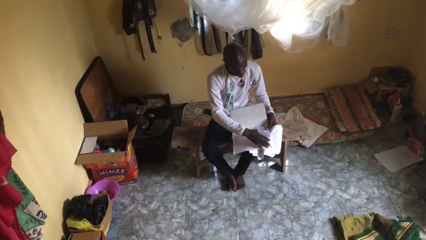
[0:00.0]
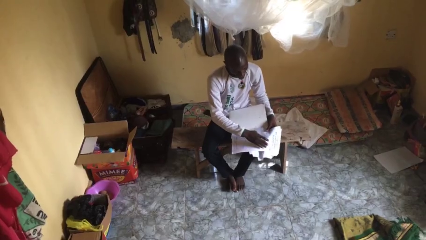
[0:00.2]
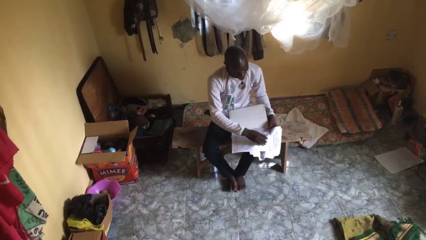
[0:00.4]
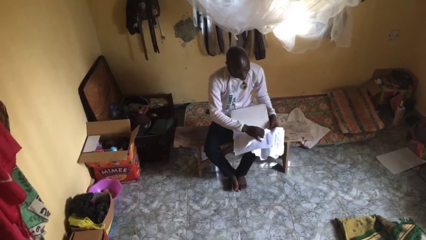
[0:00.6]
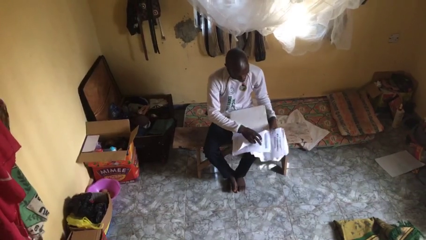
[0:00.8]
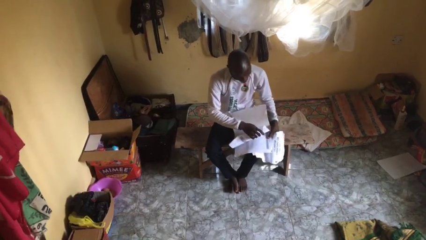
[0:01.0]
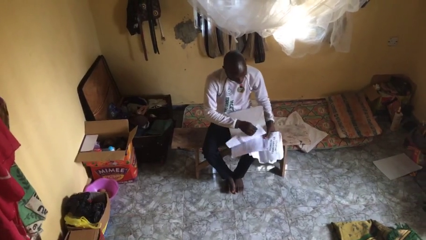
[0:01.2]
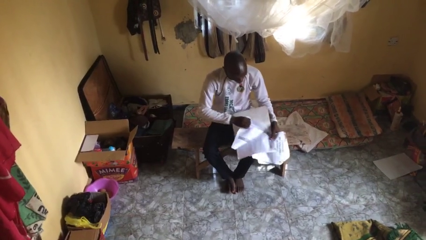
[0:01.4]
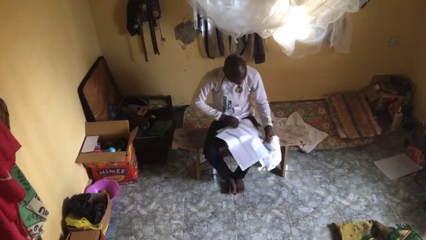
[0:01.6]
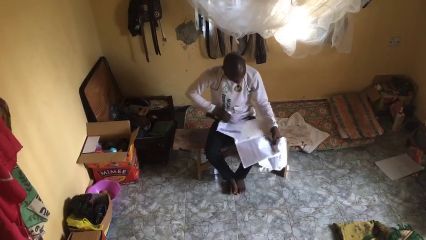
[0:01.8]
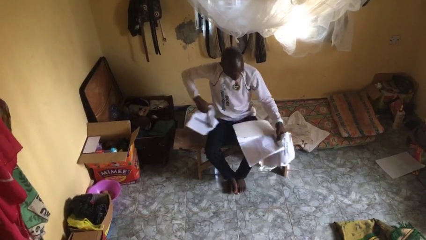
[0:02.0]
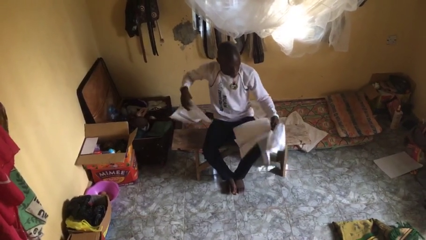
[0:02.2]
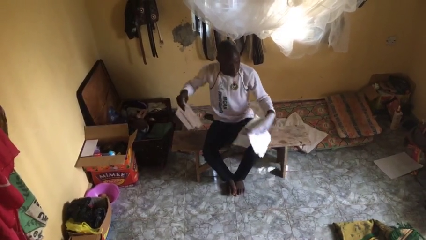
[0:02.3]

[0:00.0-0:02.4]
person tears paper

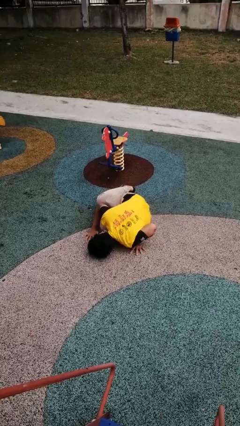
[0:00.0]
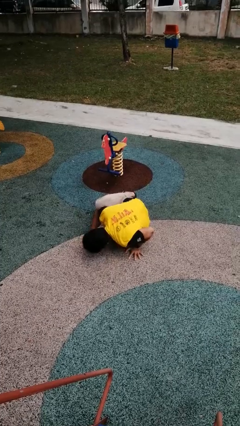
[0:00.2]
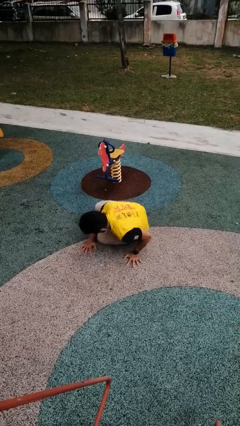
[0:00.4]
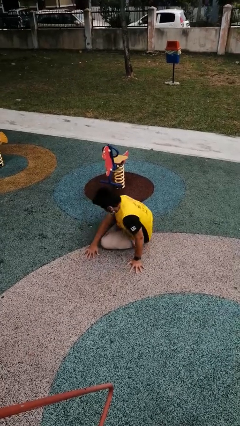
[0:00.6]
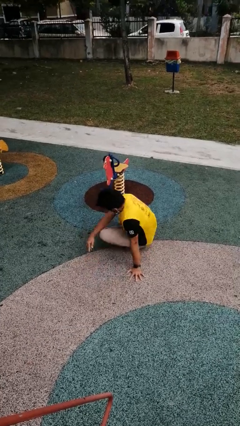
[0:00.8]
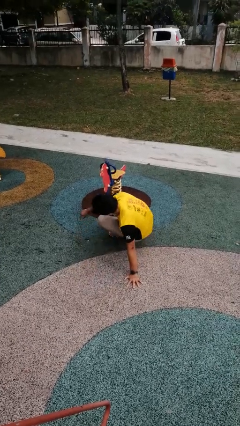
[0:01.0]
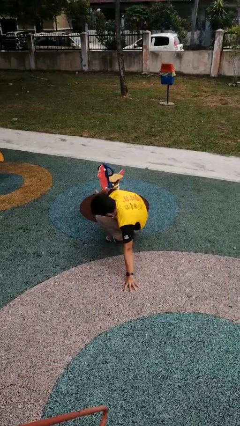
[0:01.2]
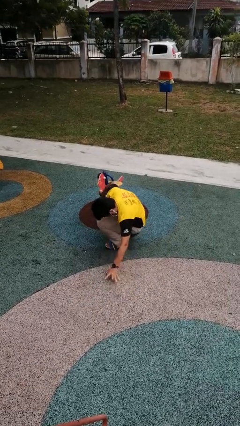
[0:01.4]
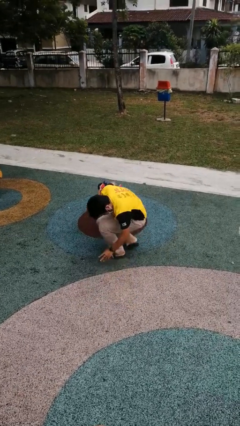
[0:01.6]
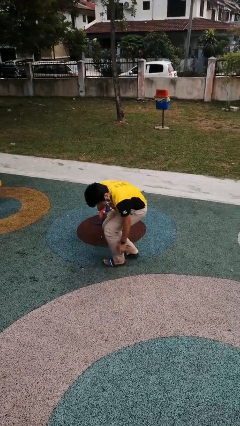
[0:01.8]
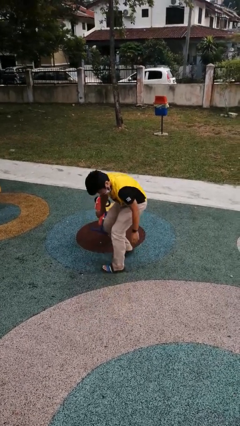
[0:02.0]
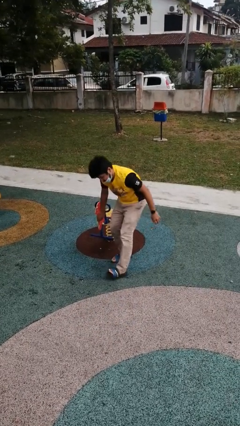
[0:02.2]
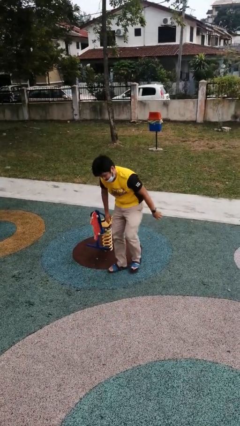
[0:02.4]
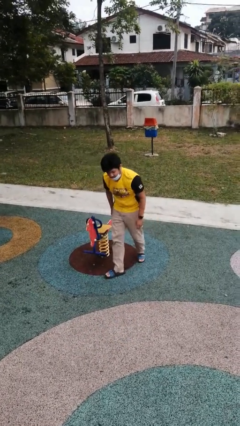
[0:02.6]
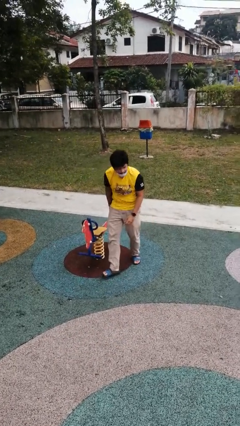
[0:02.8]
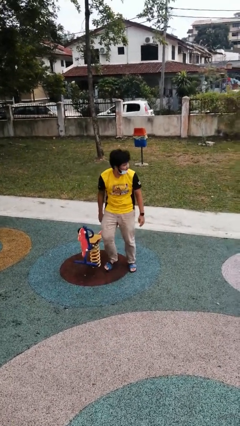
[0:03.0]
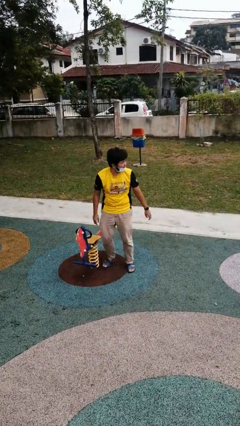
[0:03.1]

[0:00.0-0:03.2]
person stands up from floor

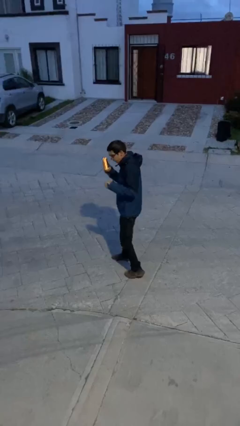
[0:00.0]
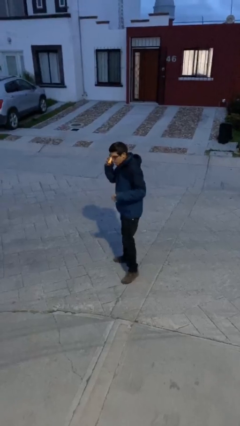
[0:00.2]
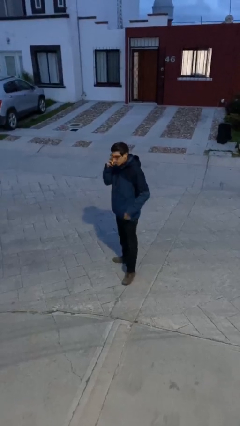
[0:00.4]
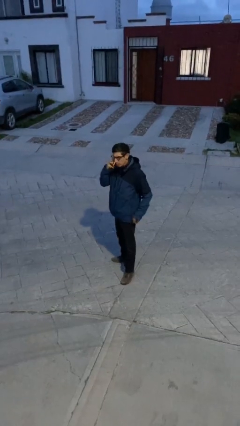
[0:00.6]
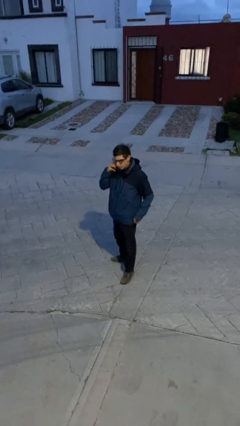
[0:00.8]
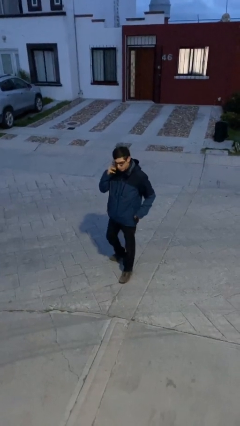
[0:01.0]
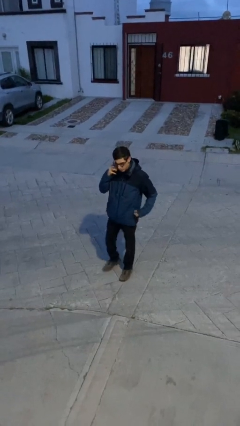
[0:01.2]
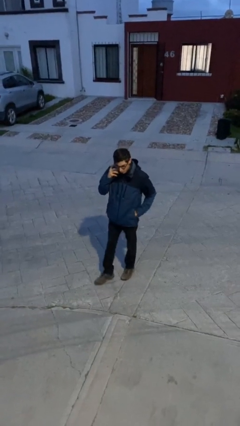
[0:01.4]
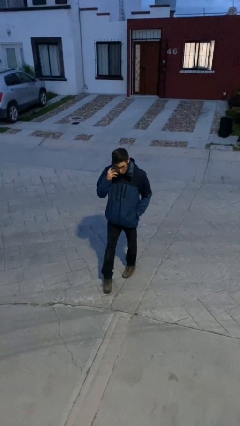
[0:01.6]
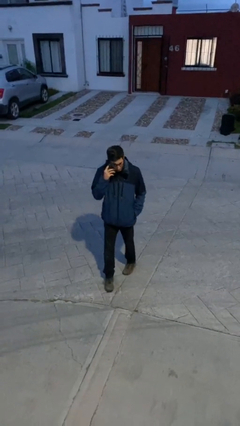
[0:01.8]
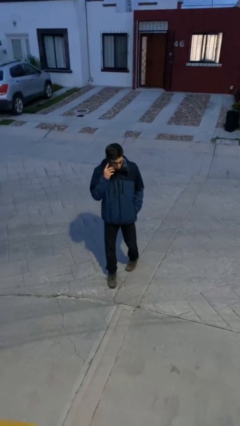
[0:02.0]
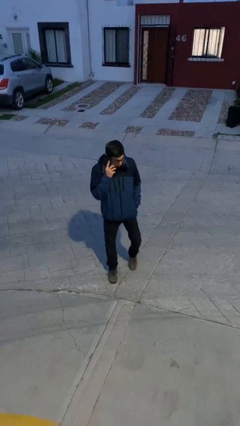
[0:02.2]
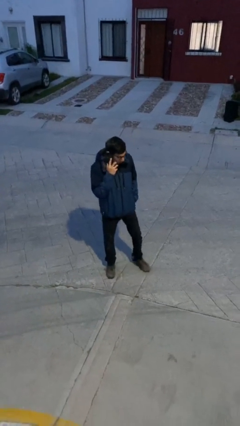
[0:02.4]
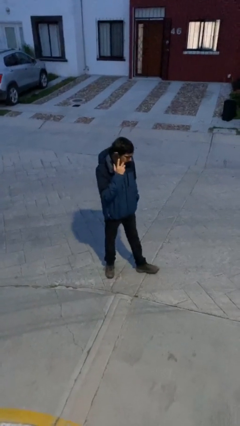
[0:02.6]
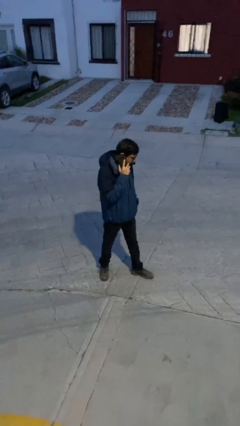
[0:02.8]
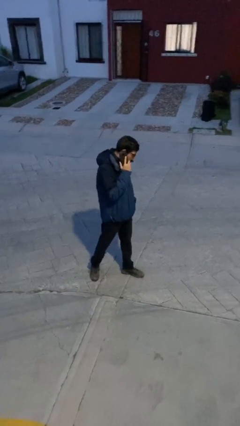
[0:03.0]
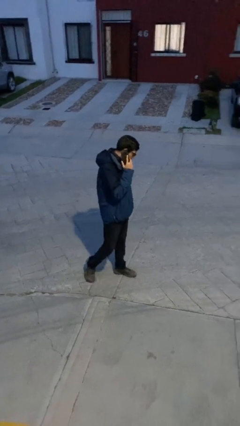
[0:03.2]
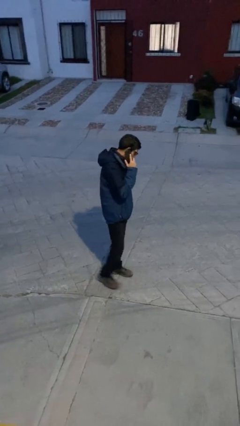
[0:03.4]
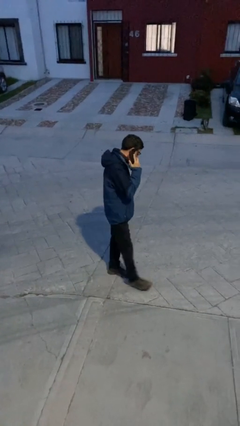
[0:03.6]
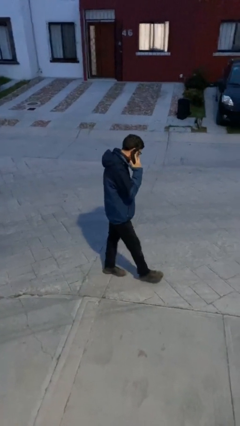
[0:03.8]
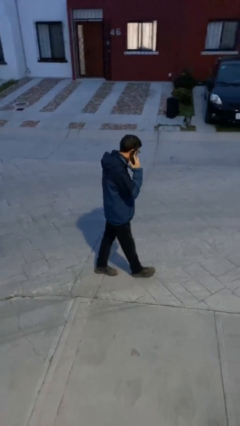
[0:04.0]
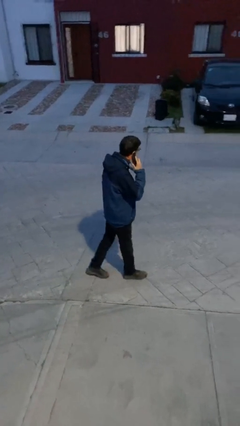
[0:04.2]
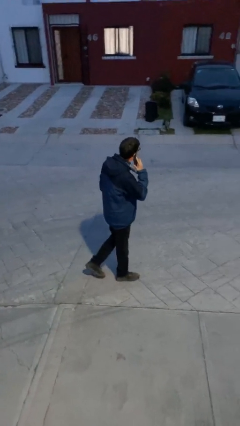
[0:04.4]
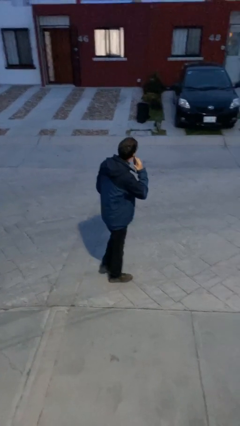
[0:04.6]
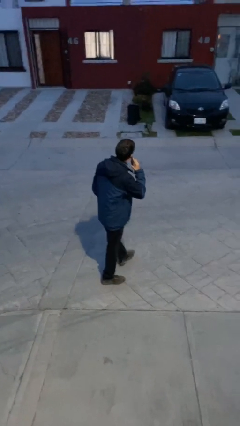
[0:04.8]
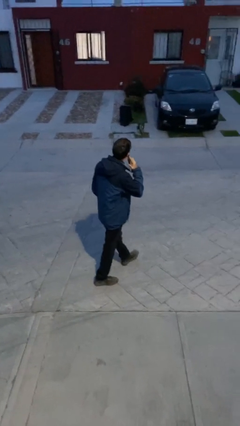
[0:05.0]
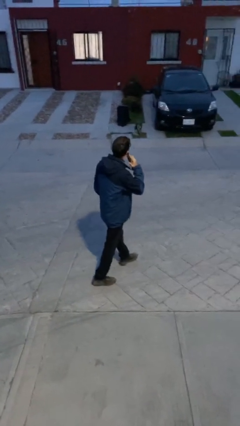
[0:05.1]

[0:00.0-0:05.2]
person talks on phone

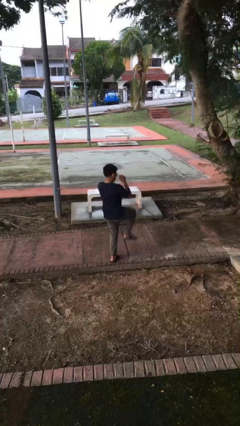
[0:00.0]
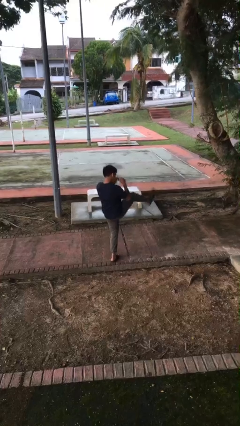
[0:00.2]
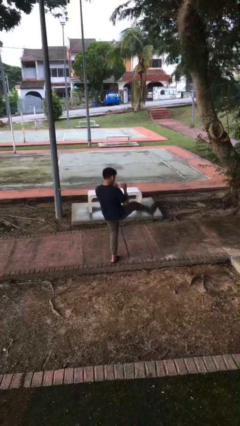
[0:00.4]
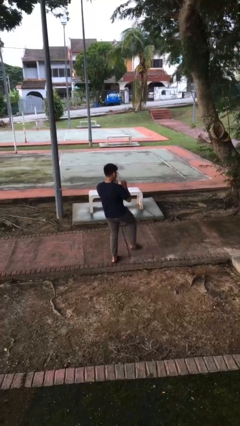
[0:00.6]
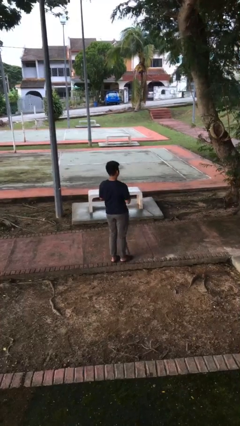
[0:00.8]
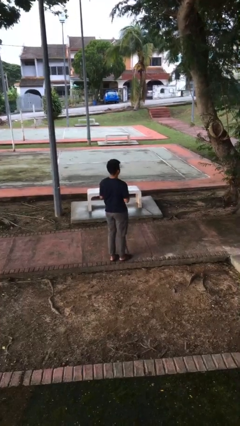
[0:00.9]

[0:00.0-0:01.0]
person karate kicks

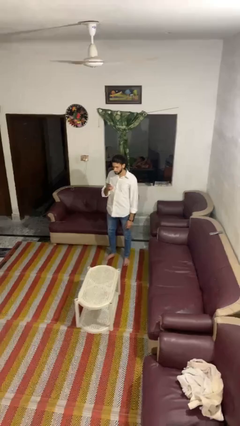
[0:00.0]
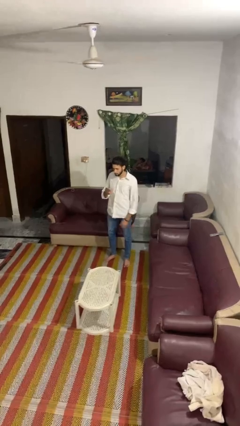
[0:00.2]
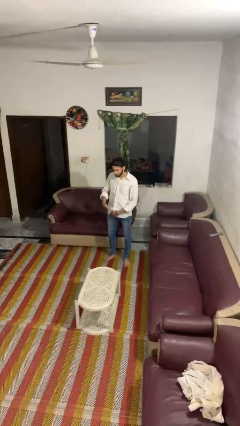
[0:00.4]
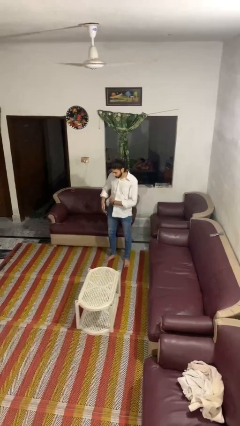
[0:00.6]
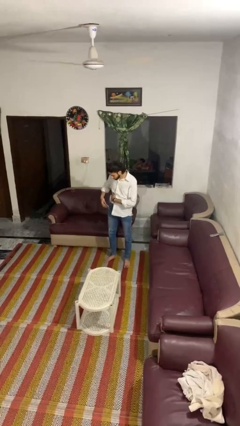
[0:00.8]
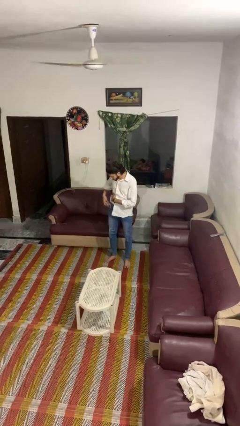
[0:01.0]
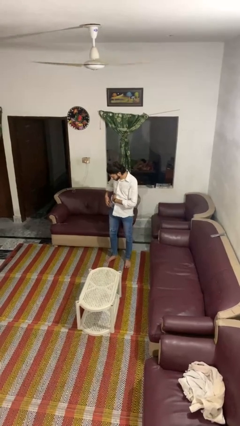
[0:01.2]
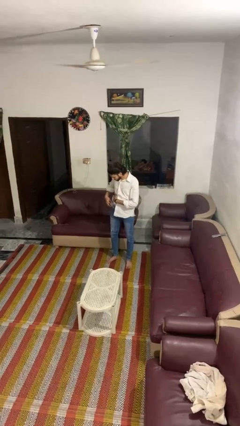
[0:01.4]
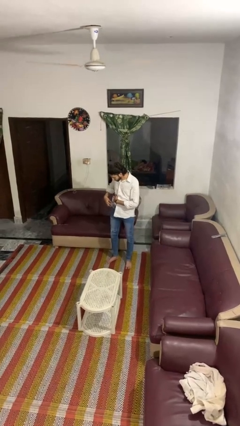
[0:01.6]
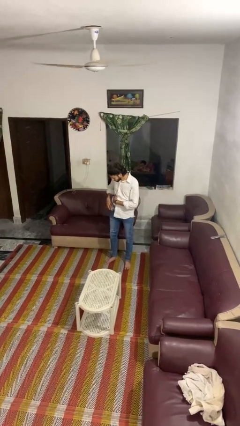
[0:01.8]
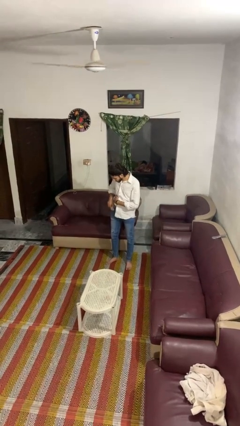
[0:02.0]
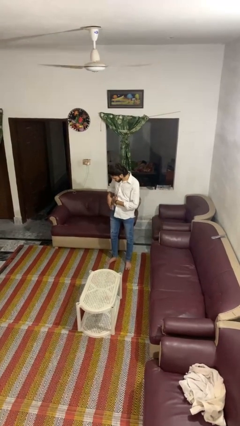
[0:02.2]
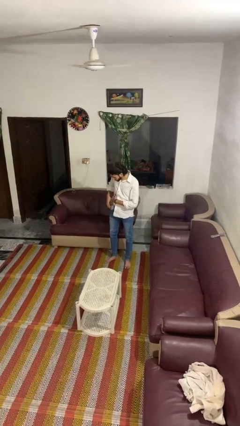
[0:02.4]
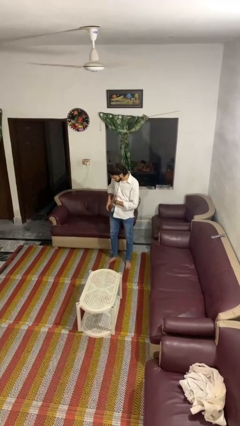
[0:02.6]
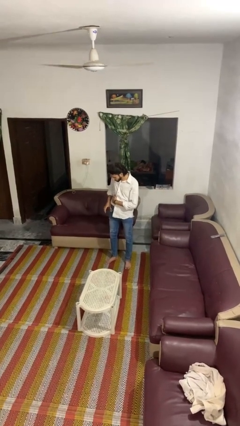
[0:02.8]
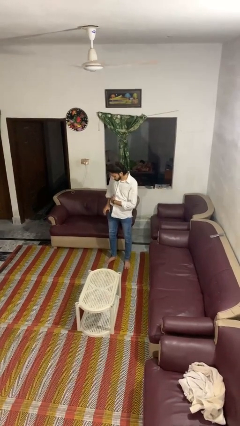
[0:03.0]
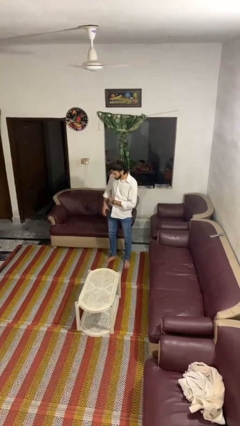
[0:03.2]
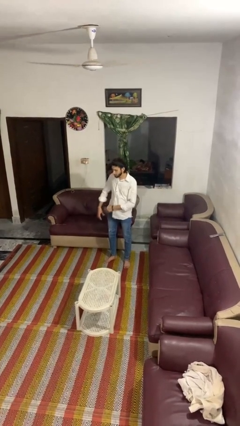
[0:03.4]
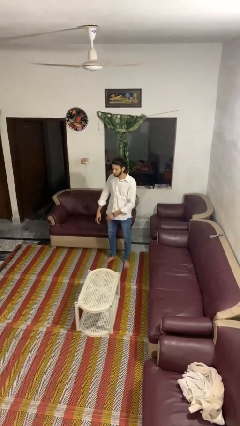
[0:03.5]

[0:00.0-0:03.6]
person puts phone into pocket

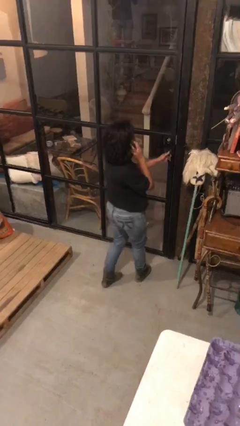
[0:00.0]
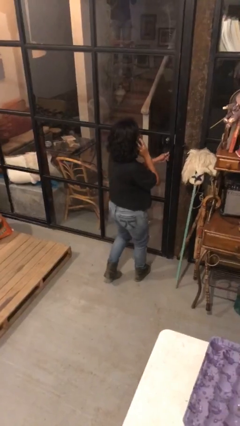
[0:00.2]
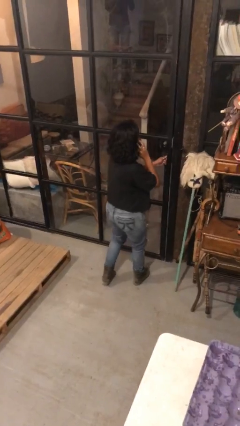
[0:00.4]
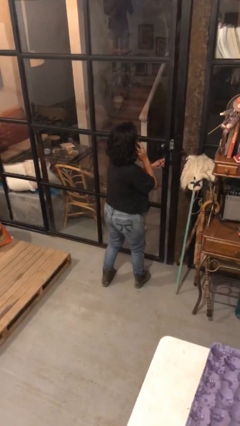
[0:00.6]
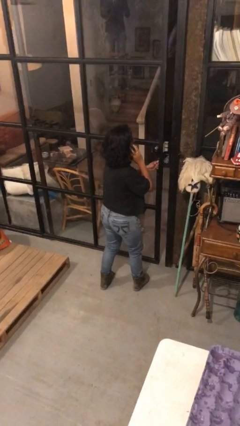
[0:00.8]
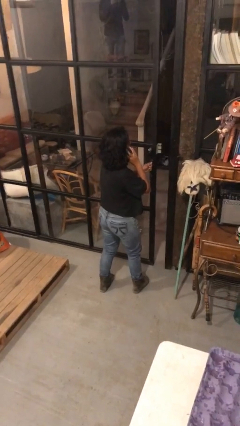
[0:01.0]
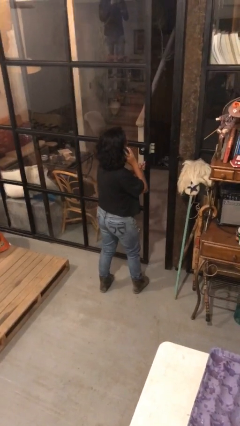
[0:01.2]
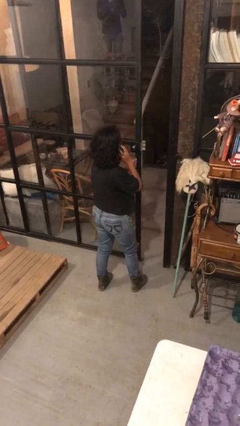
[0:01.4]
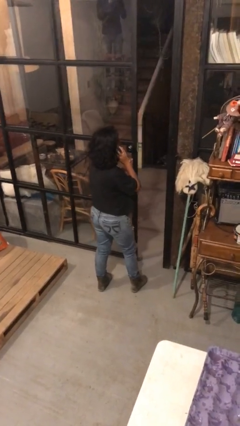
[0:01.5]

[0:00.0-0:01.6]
person opens facility door

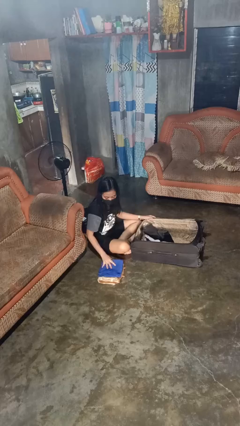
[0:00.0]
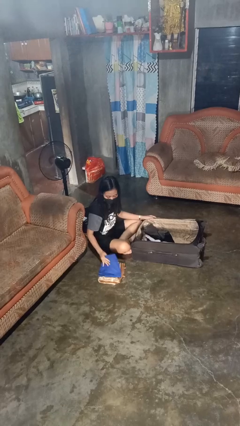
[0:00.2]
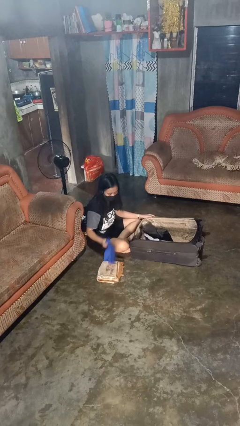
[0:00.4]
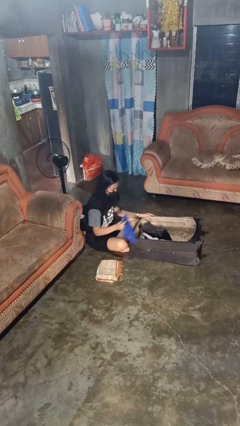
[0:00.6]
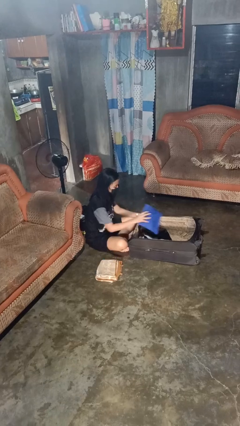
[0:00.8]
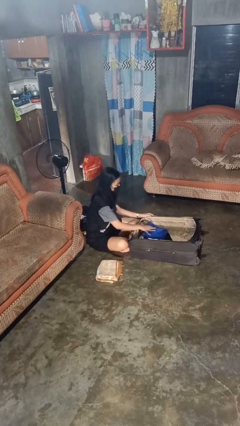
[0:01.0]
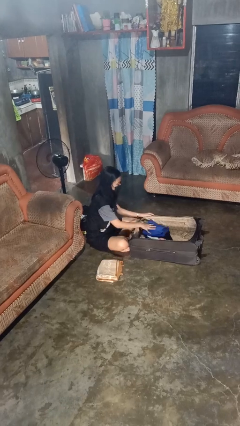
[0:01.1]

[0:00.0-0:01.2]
person loads clothes into suitcase
